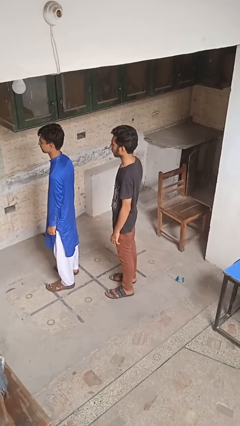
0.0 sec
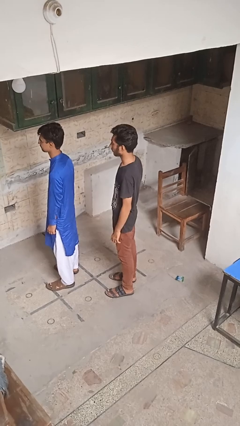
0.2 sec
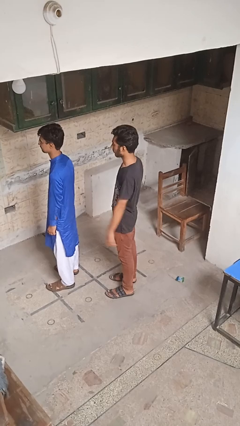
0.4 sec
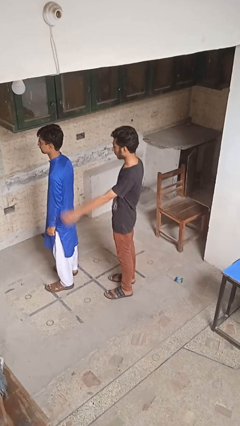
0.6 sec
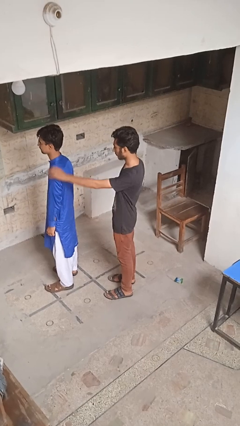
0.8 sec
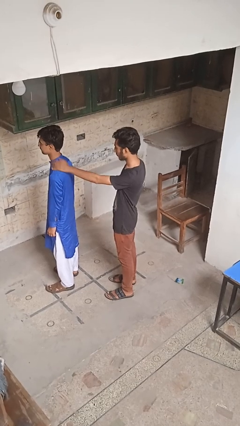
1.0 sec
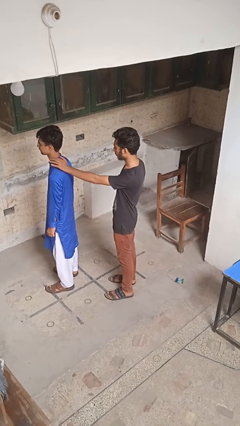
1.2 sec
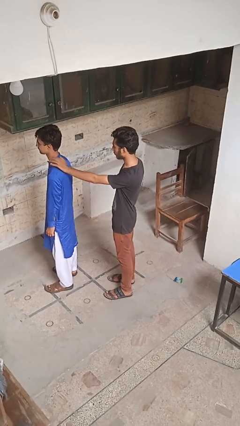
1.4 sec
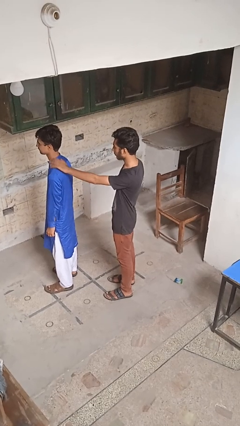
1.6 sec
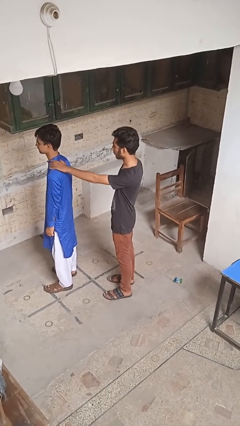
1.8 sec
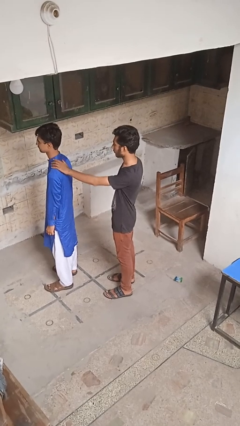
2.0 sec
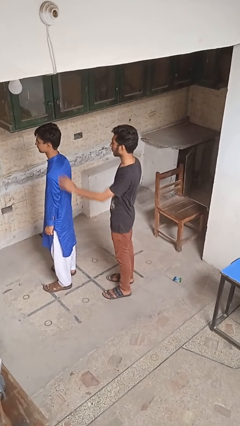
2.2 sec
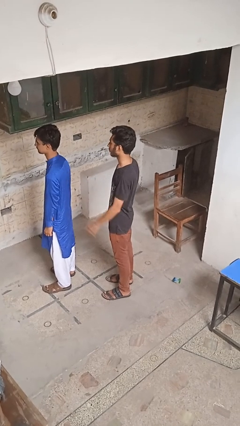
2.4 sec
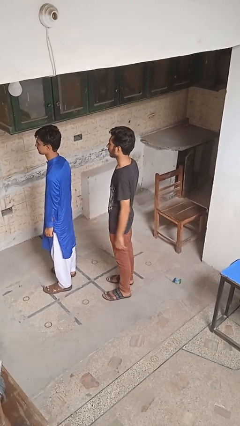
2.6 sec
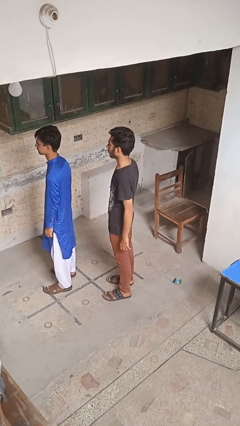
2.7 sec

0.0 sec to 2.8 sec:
person touches back of person

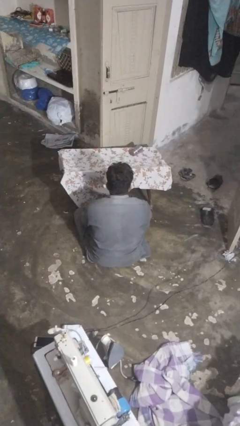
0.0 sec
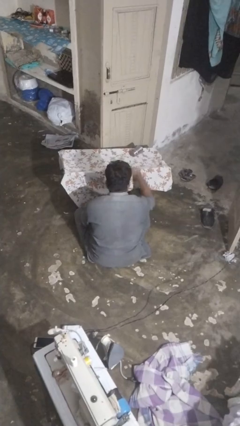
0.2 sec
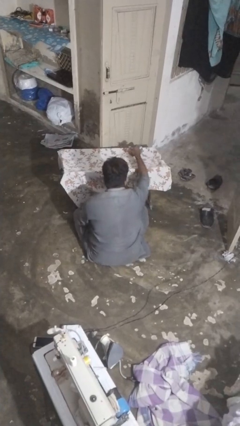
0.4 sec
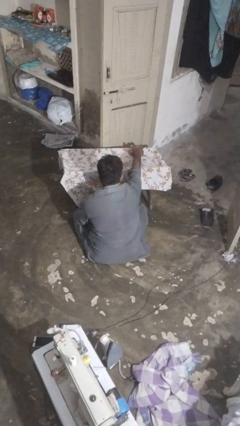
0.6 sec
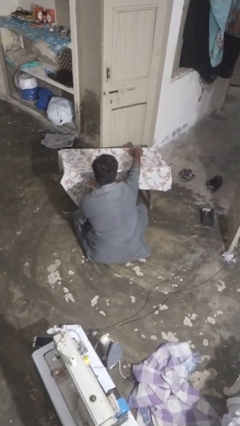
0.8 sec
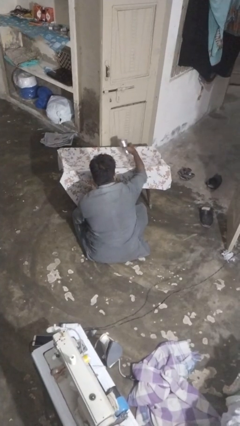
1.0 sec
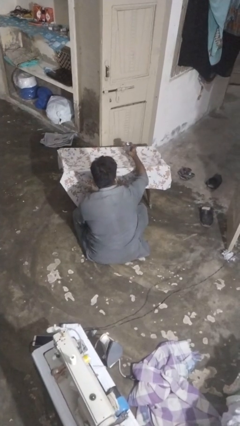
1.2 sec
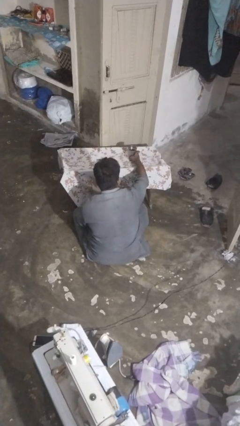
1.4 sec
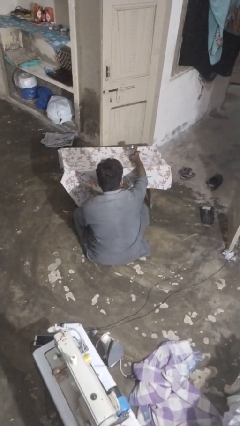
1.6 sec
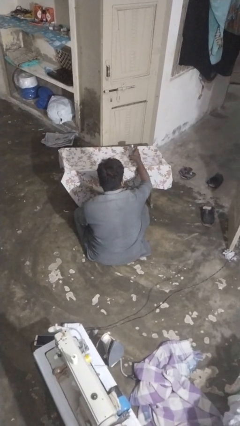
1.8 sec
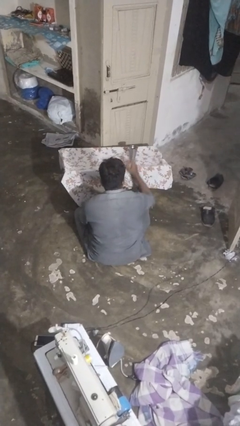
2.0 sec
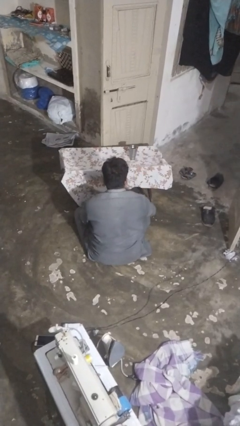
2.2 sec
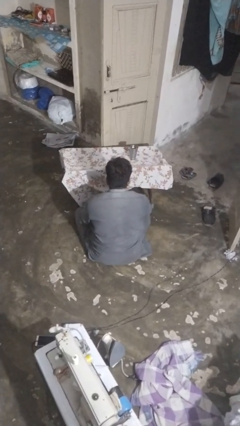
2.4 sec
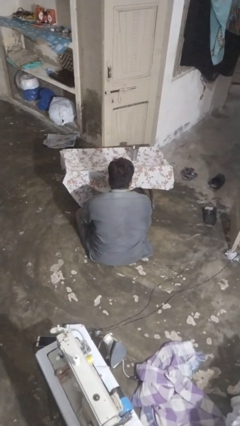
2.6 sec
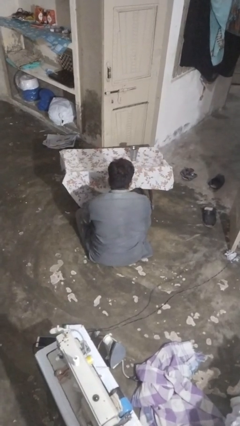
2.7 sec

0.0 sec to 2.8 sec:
person sets upright glass

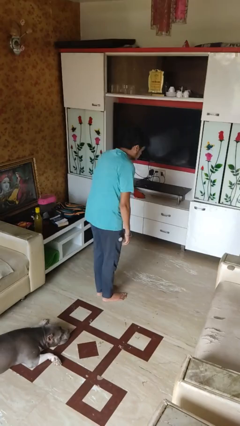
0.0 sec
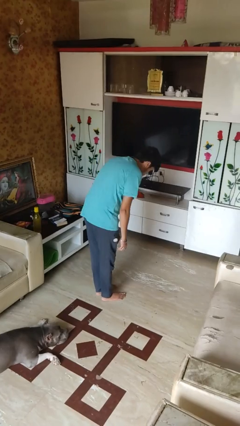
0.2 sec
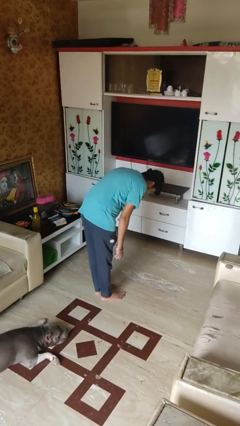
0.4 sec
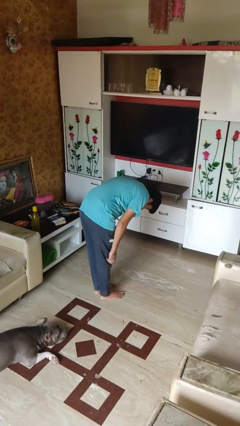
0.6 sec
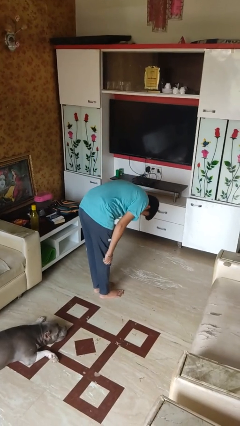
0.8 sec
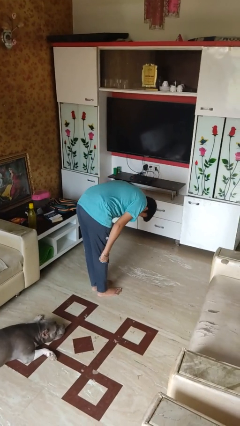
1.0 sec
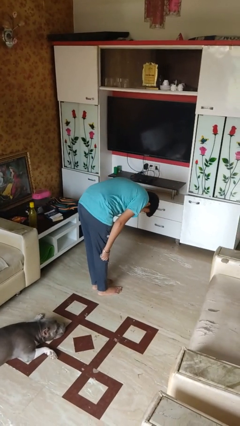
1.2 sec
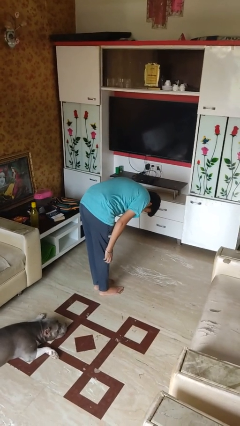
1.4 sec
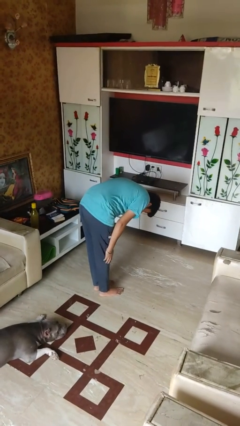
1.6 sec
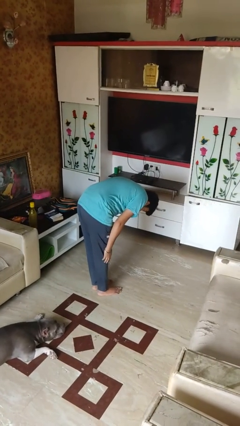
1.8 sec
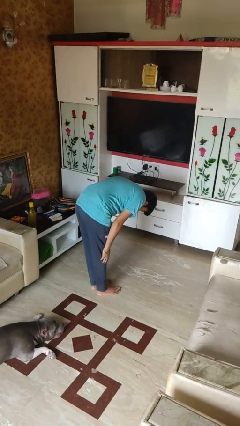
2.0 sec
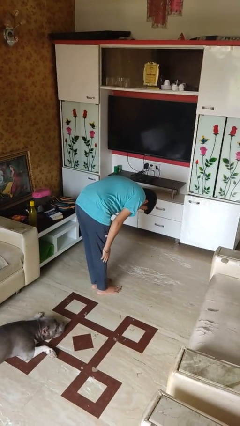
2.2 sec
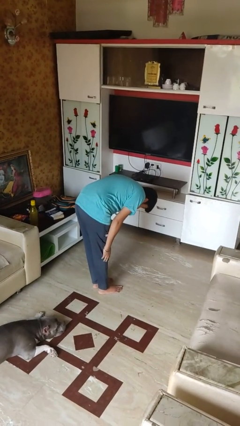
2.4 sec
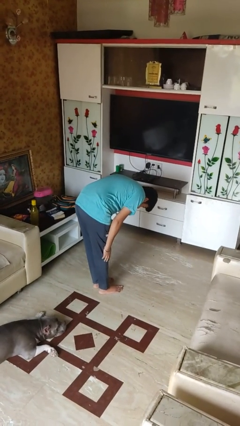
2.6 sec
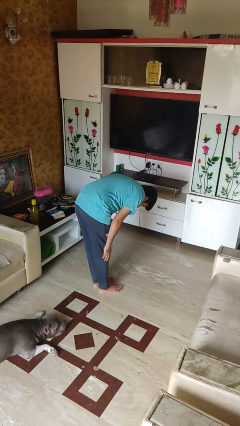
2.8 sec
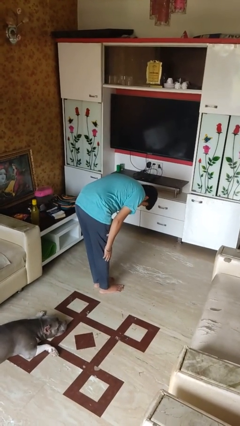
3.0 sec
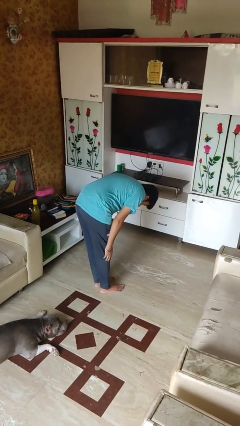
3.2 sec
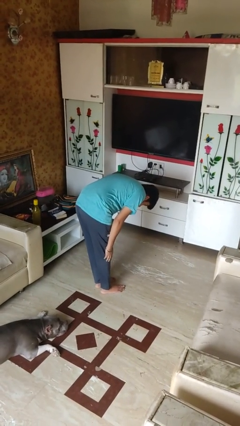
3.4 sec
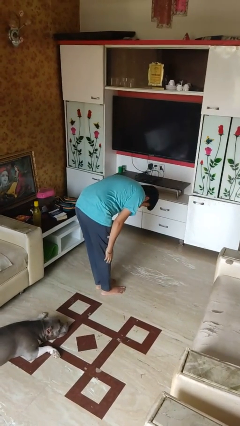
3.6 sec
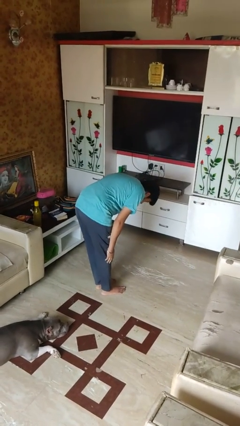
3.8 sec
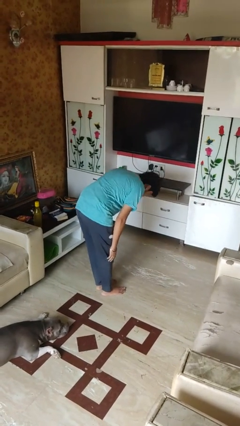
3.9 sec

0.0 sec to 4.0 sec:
person bows

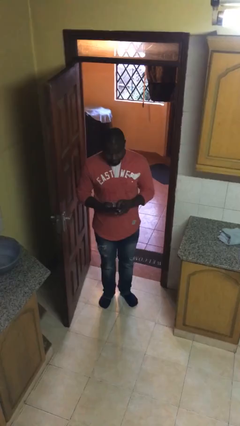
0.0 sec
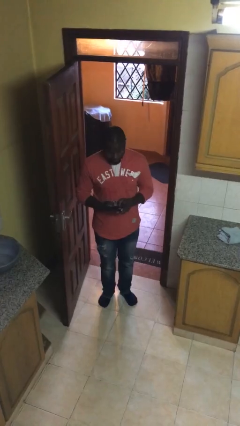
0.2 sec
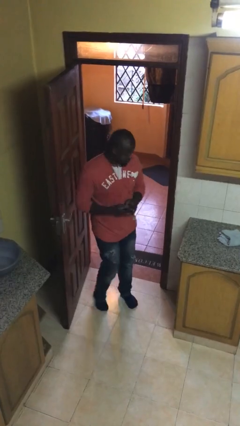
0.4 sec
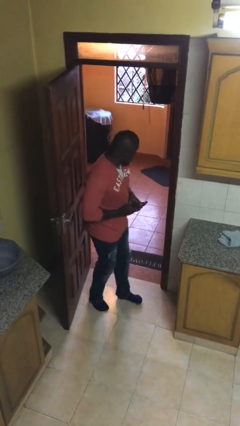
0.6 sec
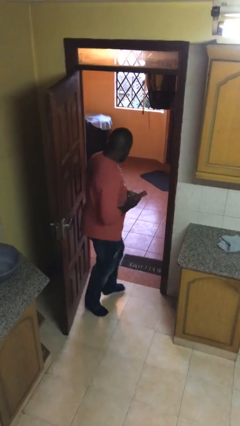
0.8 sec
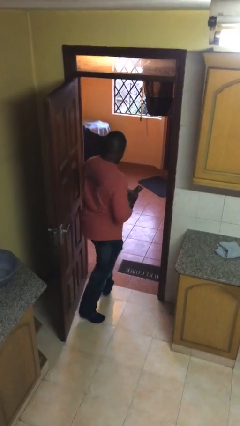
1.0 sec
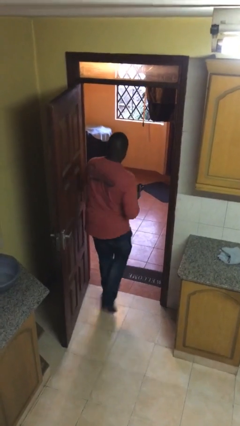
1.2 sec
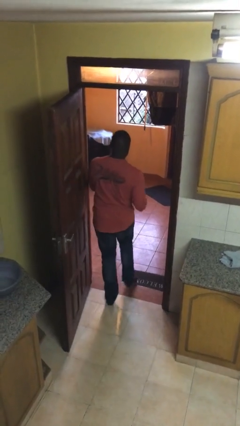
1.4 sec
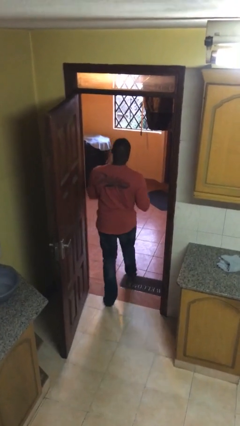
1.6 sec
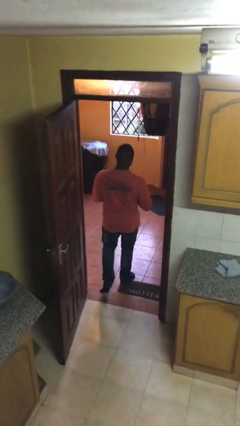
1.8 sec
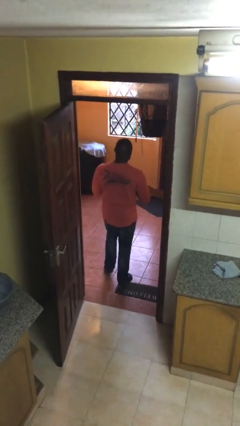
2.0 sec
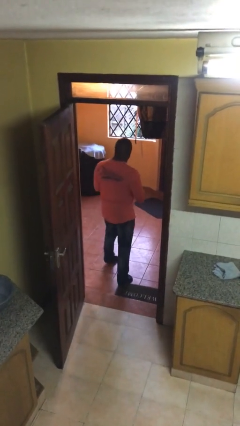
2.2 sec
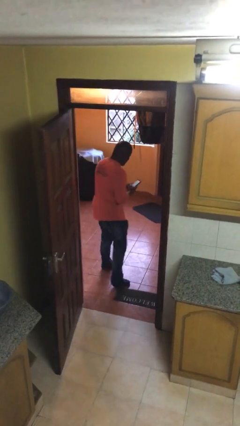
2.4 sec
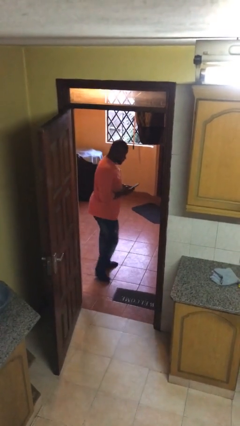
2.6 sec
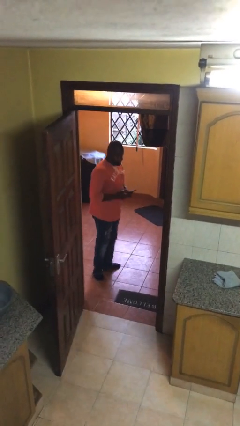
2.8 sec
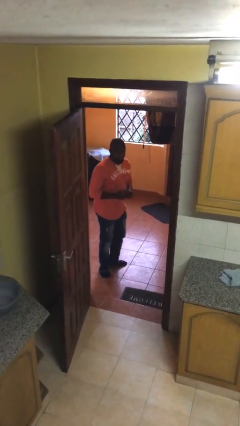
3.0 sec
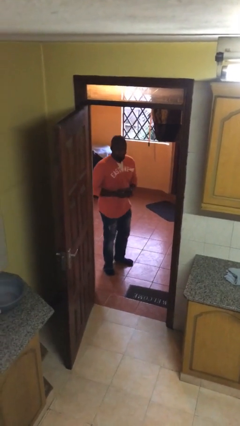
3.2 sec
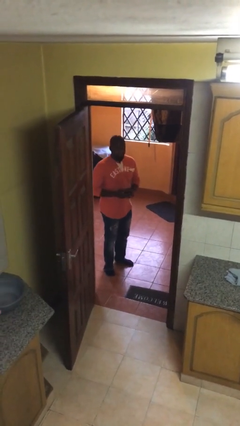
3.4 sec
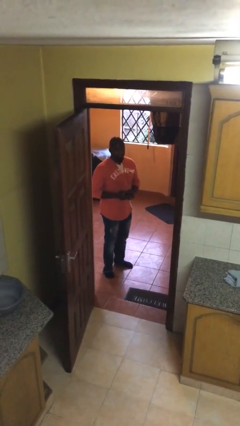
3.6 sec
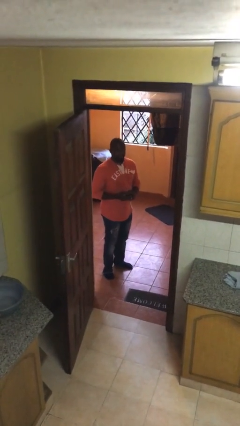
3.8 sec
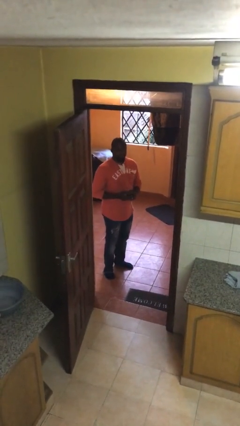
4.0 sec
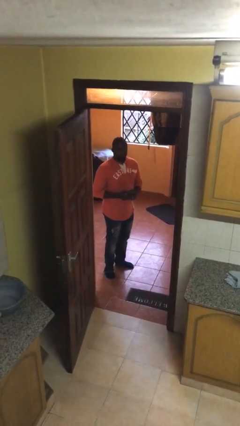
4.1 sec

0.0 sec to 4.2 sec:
person exits scene through structure

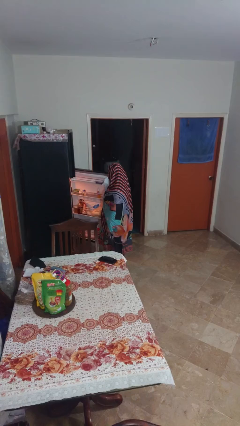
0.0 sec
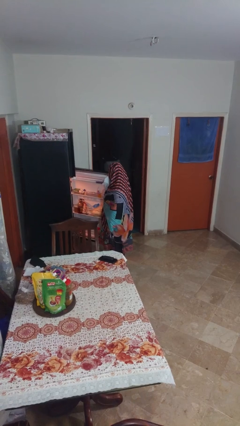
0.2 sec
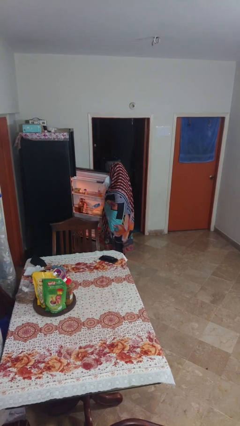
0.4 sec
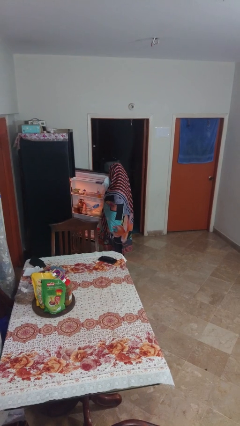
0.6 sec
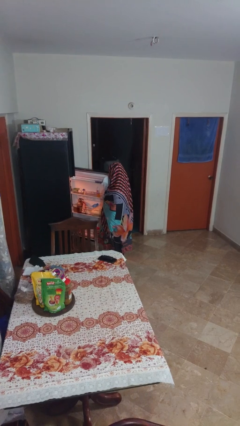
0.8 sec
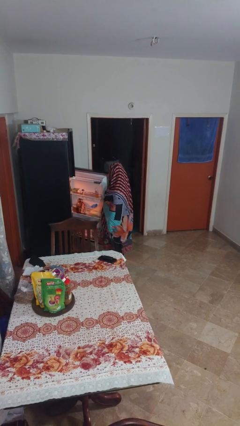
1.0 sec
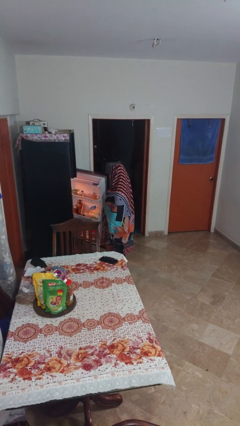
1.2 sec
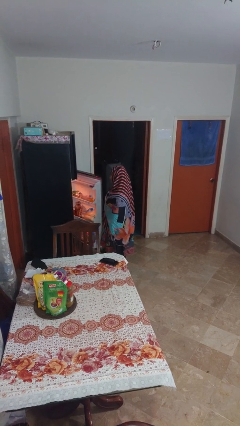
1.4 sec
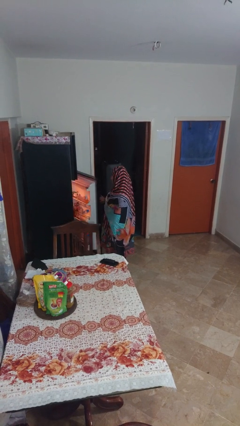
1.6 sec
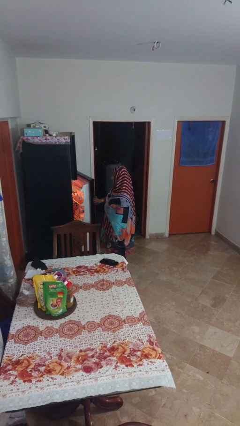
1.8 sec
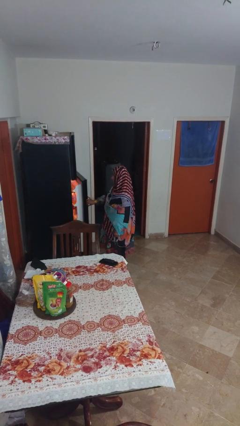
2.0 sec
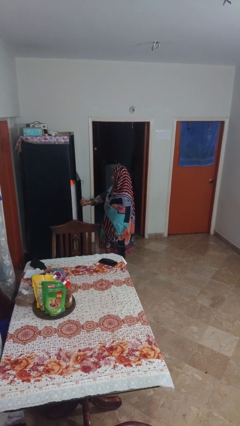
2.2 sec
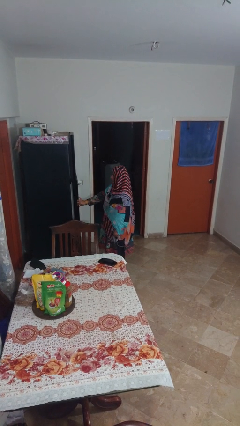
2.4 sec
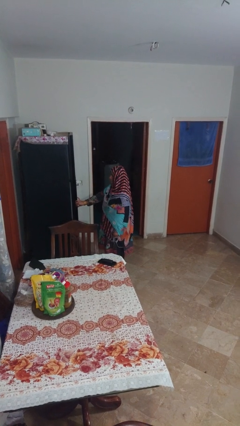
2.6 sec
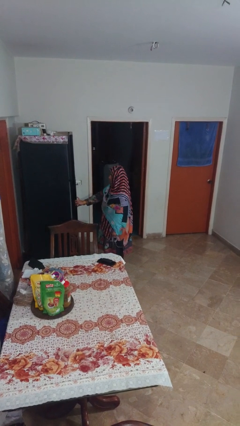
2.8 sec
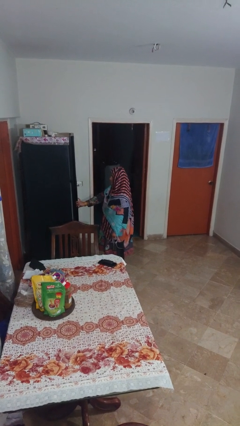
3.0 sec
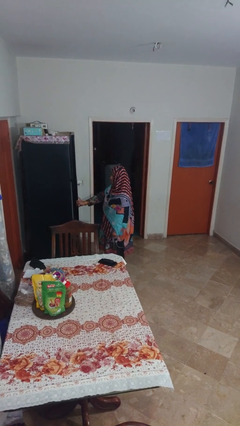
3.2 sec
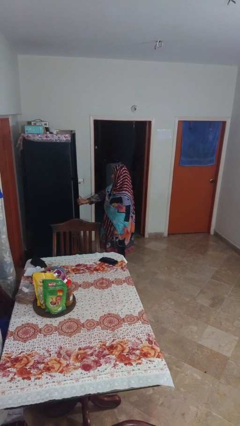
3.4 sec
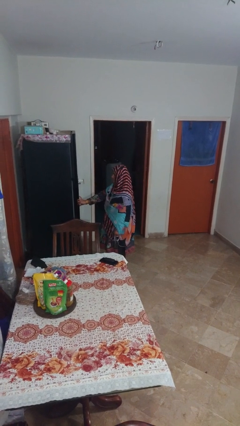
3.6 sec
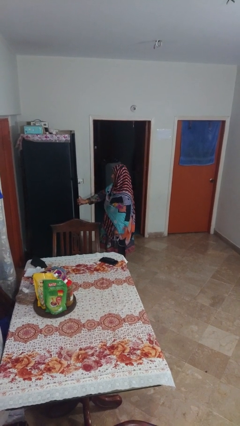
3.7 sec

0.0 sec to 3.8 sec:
person closes refrigerator

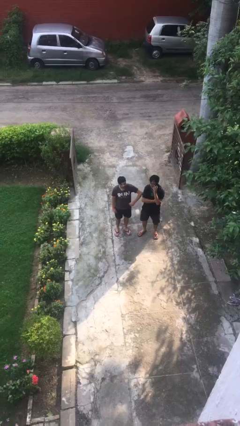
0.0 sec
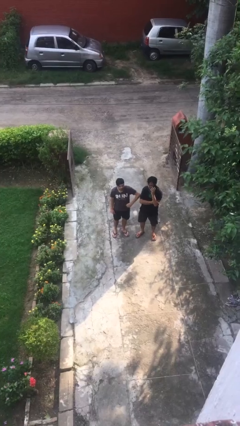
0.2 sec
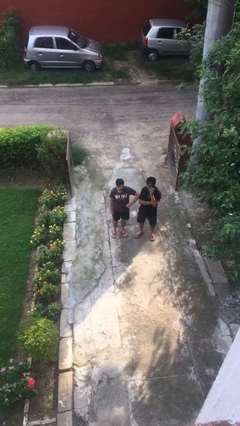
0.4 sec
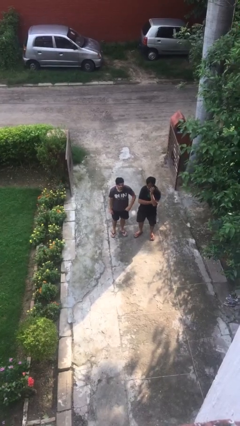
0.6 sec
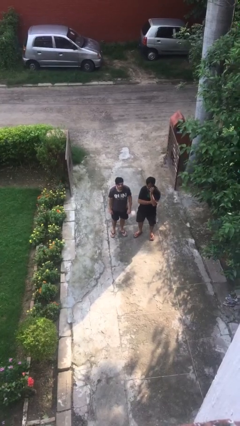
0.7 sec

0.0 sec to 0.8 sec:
person nudges person with elbow
